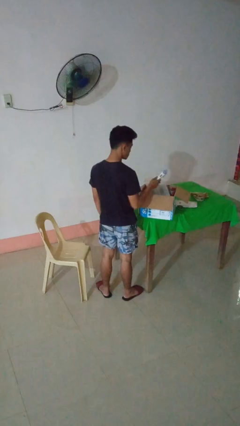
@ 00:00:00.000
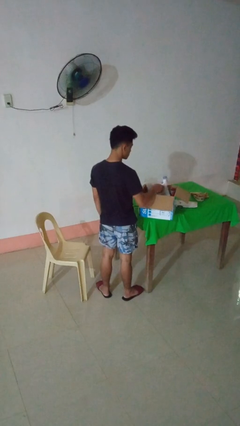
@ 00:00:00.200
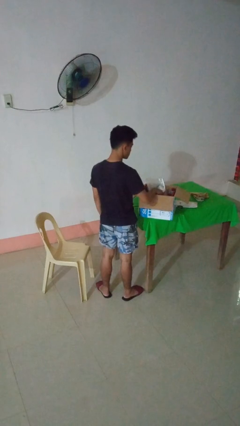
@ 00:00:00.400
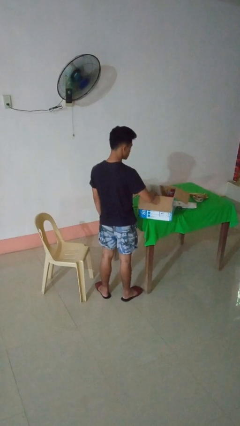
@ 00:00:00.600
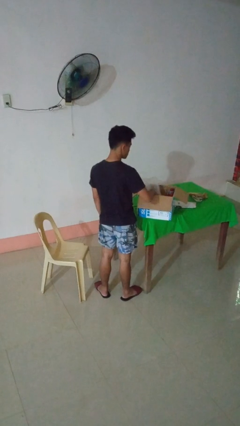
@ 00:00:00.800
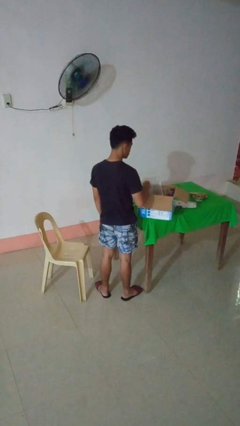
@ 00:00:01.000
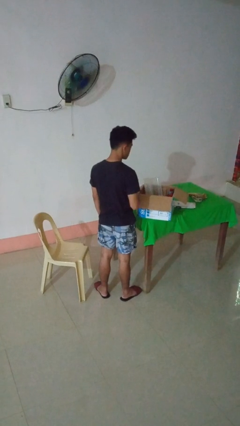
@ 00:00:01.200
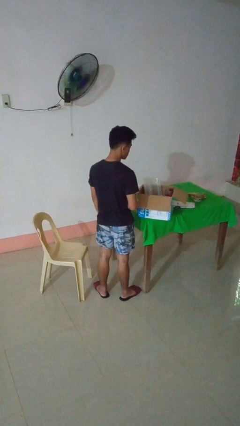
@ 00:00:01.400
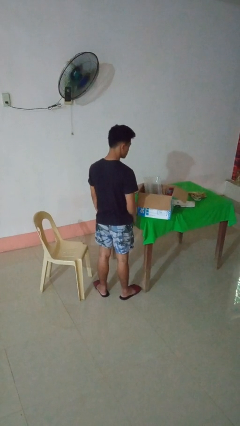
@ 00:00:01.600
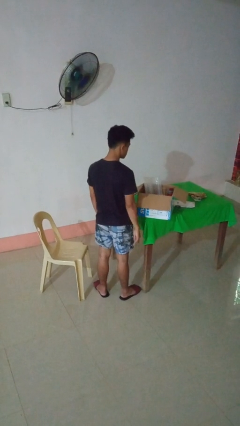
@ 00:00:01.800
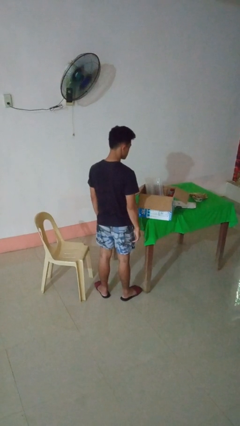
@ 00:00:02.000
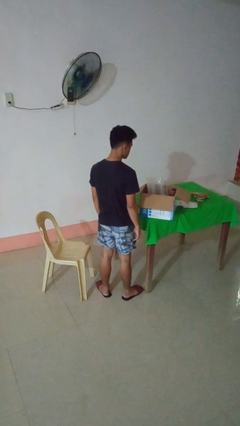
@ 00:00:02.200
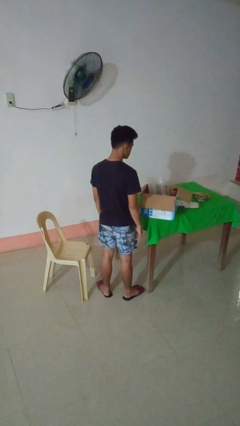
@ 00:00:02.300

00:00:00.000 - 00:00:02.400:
person puts object into box

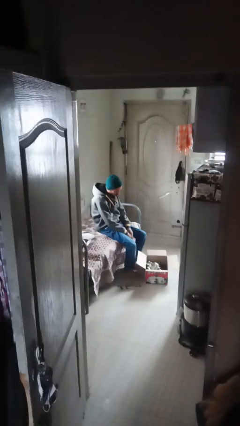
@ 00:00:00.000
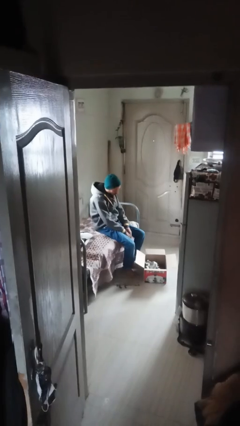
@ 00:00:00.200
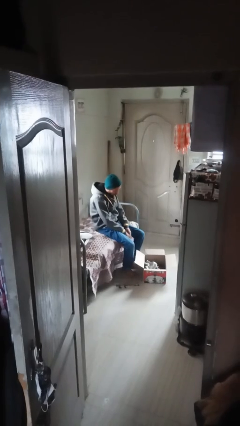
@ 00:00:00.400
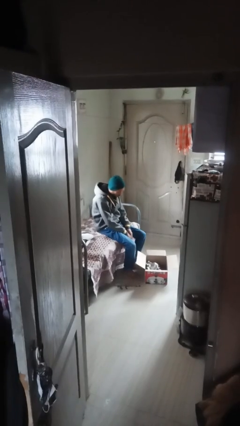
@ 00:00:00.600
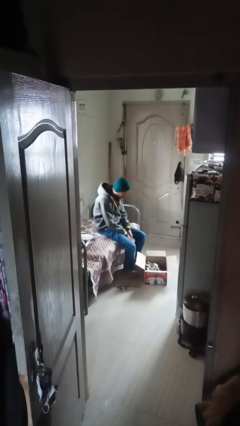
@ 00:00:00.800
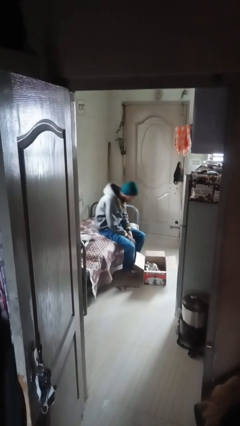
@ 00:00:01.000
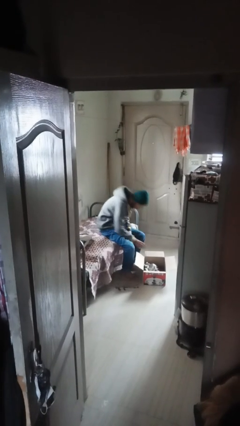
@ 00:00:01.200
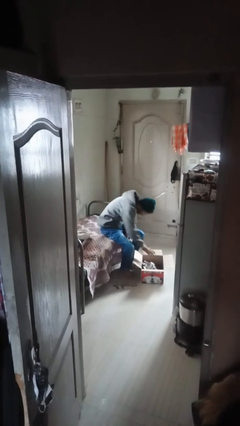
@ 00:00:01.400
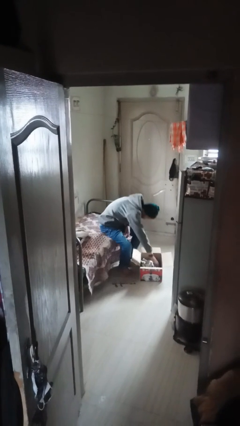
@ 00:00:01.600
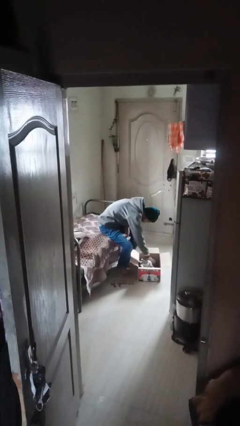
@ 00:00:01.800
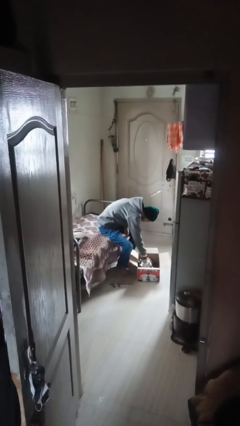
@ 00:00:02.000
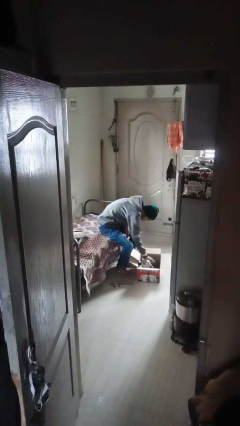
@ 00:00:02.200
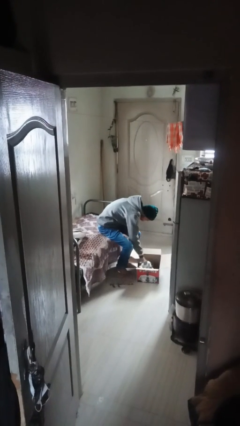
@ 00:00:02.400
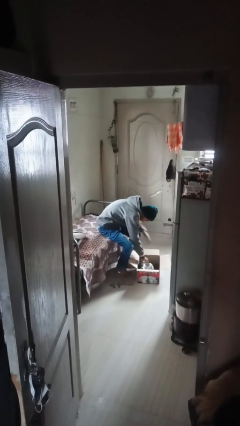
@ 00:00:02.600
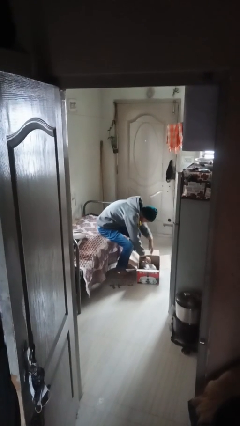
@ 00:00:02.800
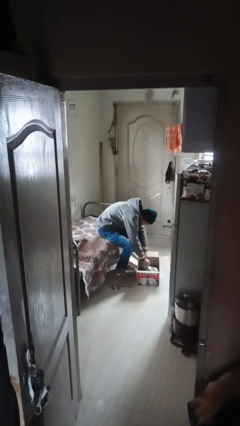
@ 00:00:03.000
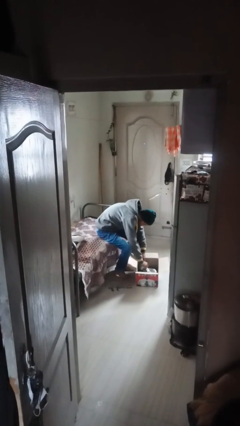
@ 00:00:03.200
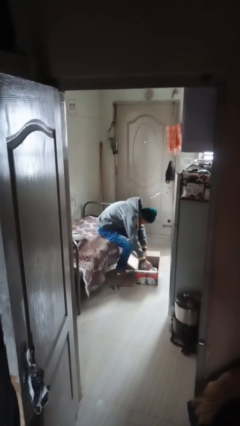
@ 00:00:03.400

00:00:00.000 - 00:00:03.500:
person searches in box

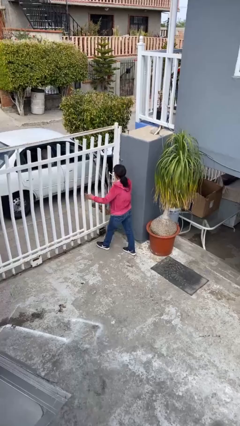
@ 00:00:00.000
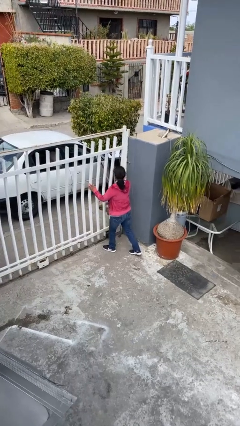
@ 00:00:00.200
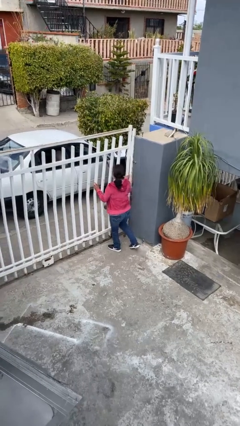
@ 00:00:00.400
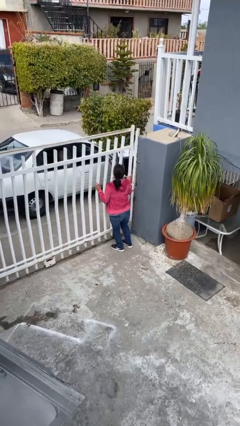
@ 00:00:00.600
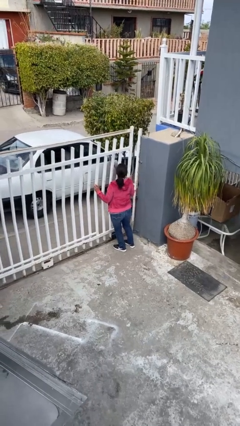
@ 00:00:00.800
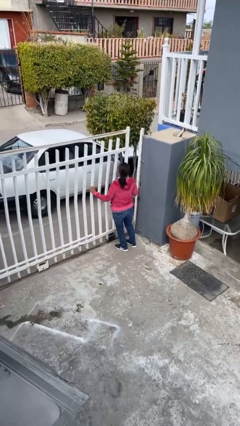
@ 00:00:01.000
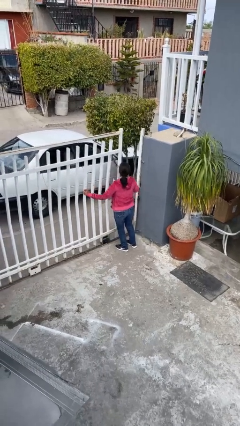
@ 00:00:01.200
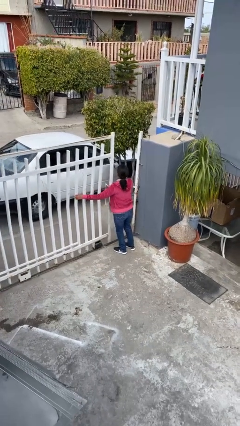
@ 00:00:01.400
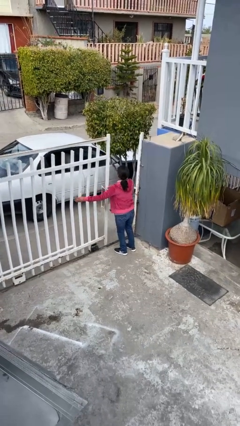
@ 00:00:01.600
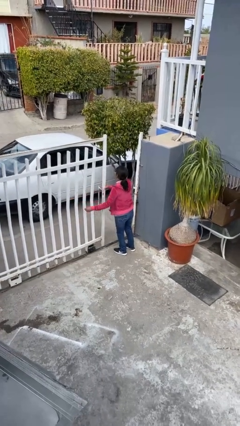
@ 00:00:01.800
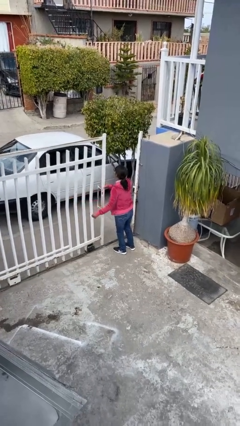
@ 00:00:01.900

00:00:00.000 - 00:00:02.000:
person opens facility door

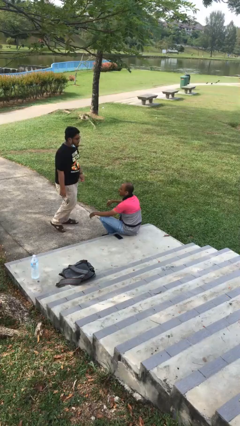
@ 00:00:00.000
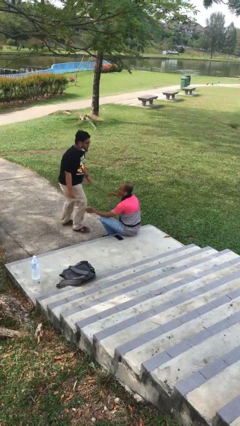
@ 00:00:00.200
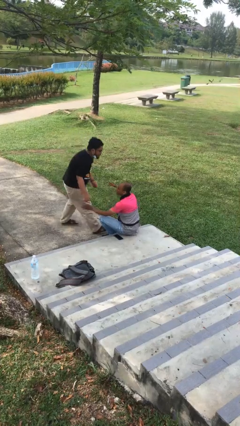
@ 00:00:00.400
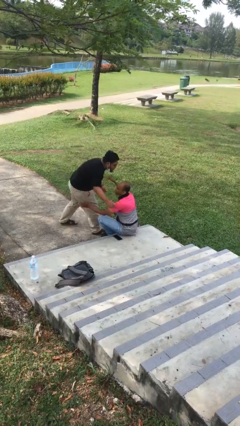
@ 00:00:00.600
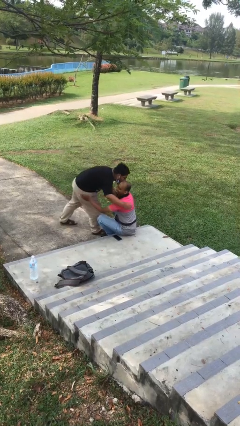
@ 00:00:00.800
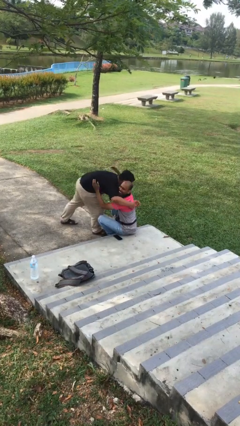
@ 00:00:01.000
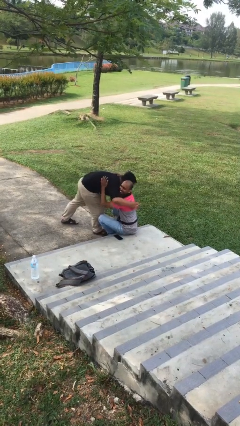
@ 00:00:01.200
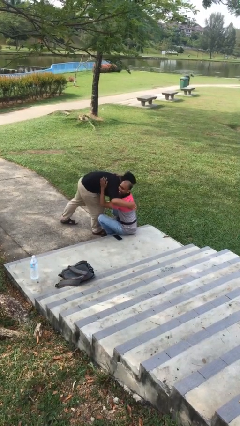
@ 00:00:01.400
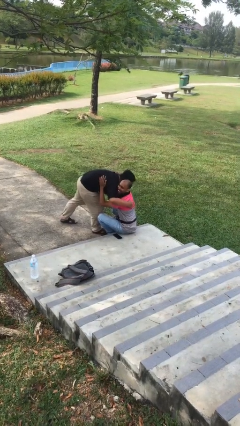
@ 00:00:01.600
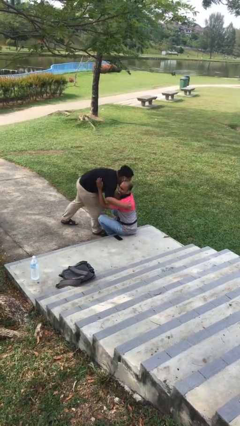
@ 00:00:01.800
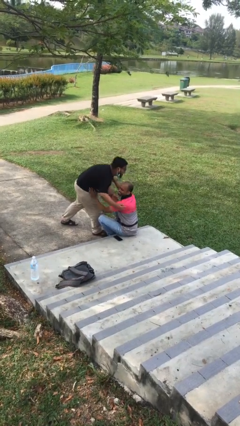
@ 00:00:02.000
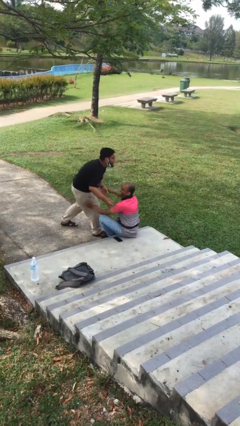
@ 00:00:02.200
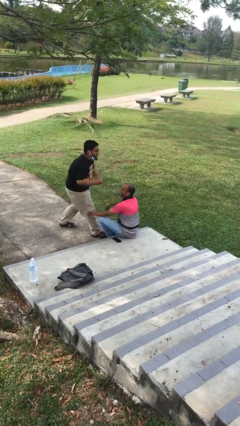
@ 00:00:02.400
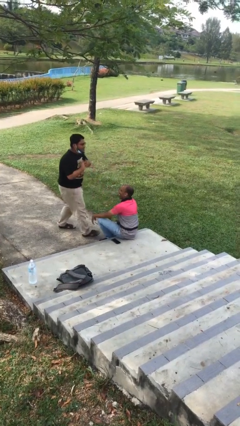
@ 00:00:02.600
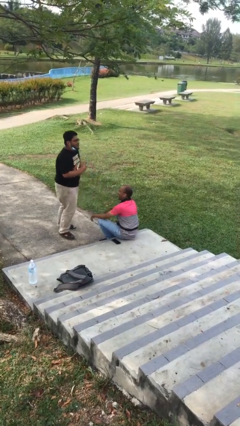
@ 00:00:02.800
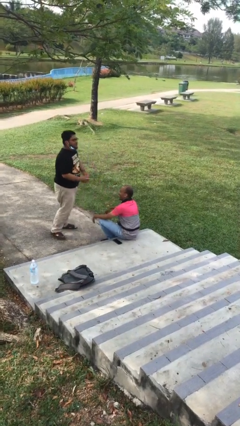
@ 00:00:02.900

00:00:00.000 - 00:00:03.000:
person embraces person

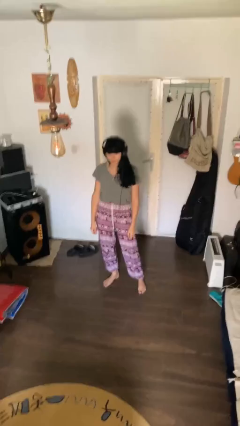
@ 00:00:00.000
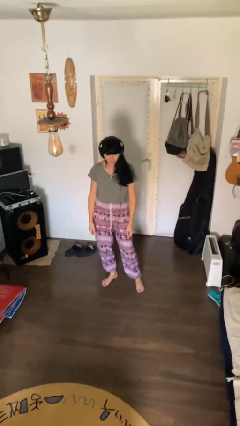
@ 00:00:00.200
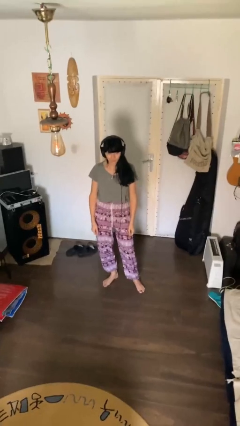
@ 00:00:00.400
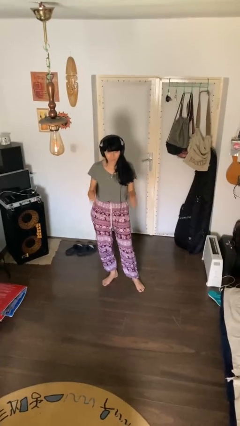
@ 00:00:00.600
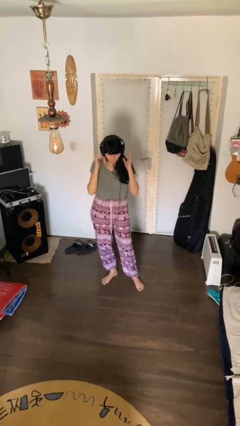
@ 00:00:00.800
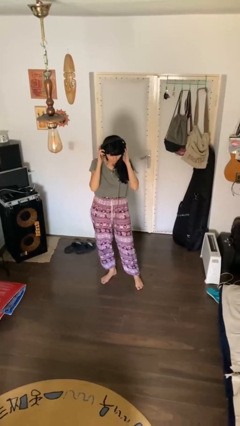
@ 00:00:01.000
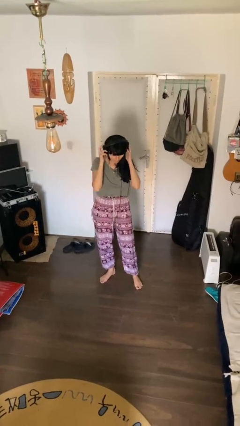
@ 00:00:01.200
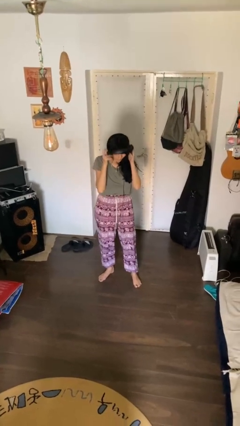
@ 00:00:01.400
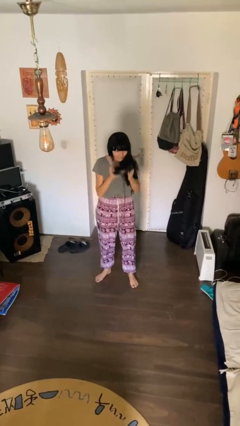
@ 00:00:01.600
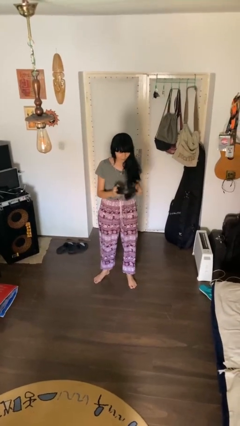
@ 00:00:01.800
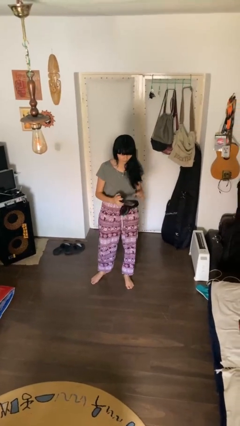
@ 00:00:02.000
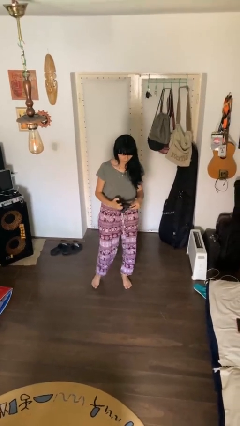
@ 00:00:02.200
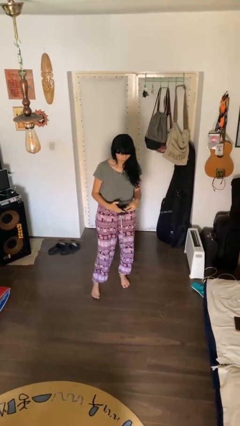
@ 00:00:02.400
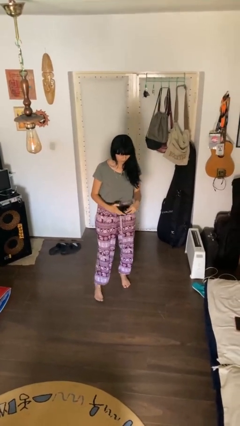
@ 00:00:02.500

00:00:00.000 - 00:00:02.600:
person takes off headphones

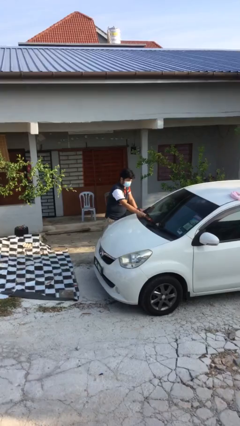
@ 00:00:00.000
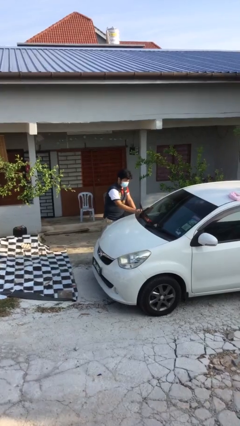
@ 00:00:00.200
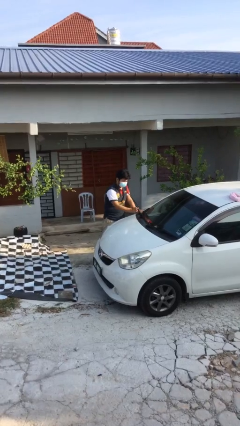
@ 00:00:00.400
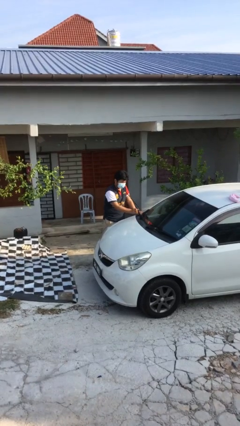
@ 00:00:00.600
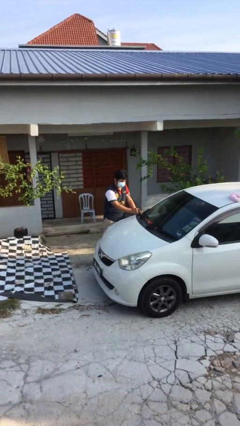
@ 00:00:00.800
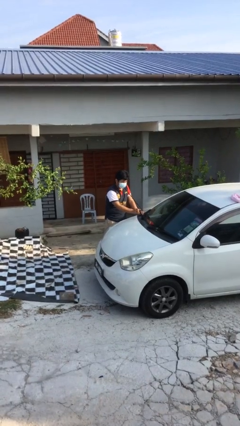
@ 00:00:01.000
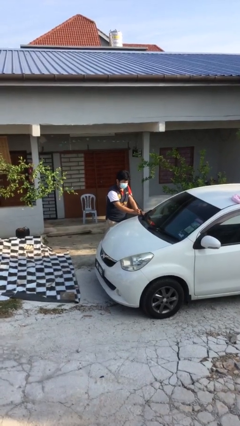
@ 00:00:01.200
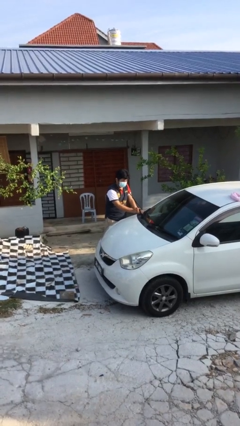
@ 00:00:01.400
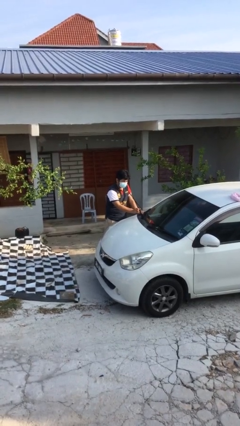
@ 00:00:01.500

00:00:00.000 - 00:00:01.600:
person flips up car wipers

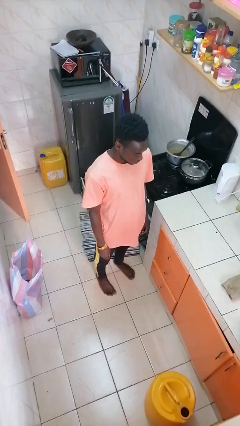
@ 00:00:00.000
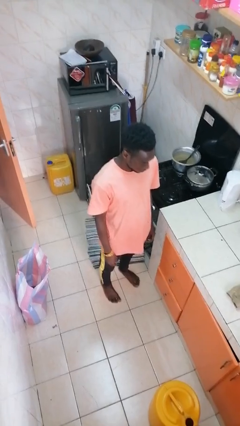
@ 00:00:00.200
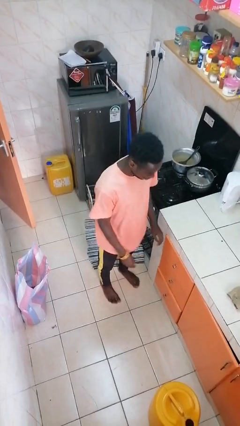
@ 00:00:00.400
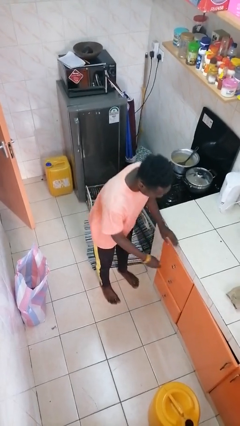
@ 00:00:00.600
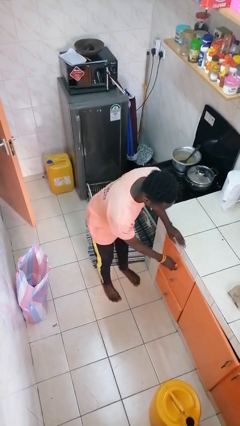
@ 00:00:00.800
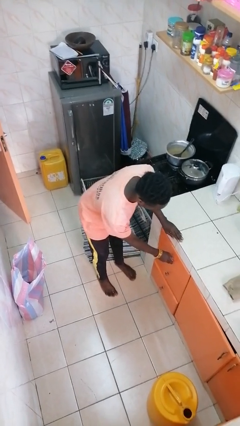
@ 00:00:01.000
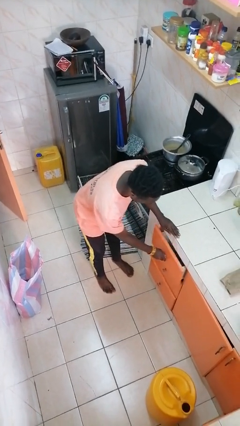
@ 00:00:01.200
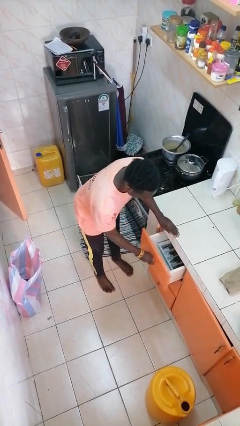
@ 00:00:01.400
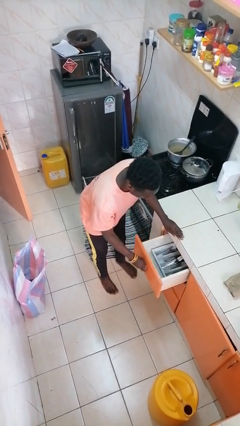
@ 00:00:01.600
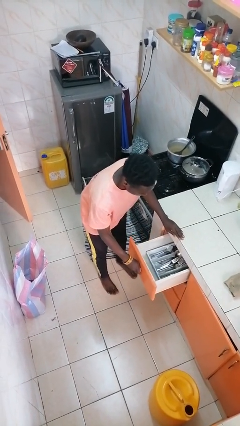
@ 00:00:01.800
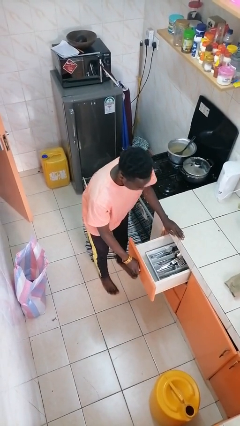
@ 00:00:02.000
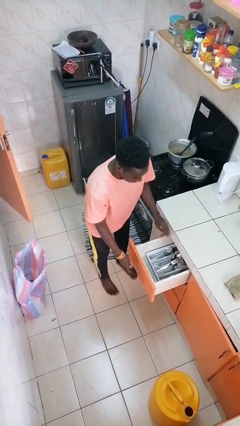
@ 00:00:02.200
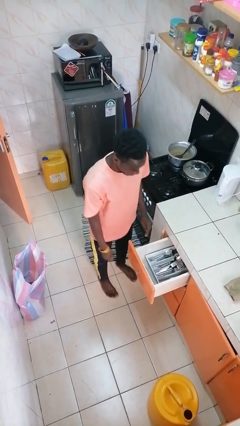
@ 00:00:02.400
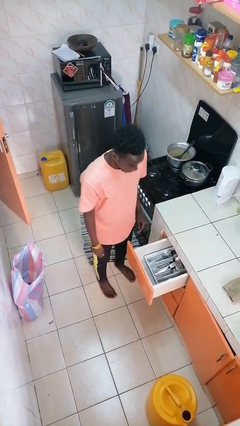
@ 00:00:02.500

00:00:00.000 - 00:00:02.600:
person opens kitchen drawer
